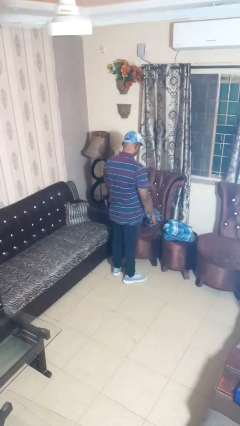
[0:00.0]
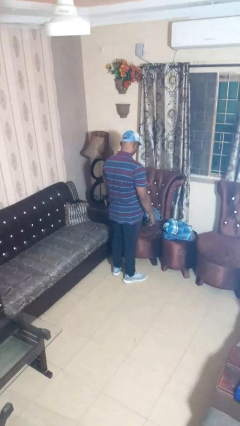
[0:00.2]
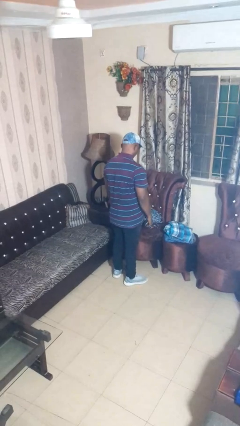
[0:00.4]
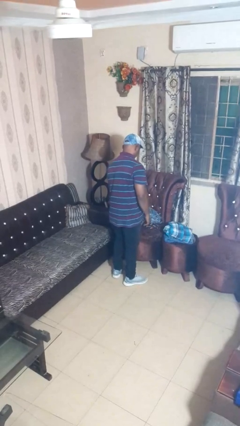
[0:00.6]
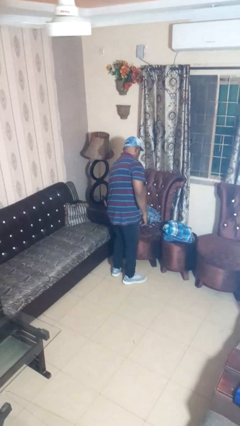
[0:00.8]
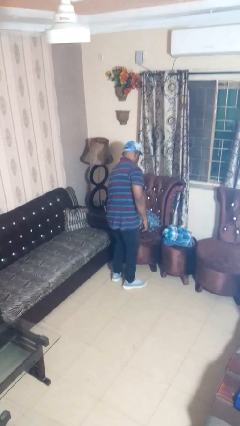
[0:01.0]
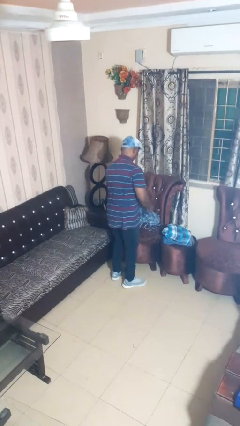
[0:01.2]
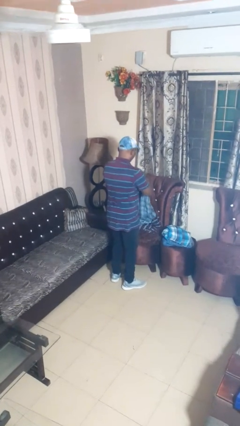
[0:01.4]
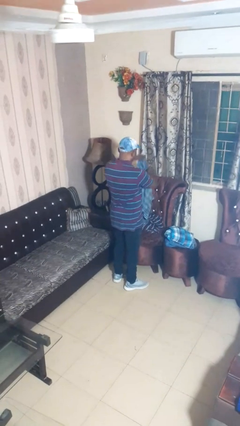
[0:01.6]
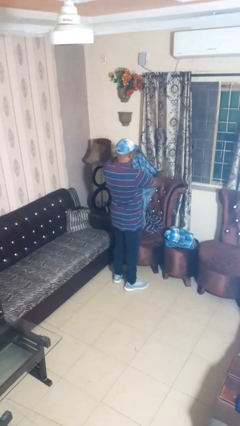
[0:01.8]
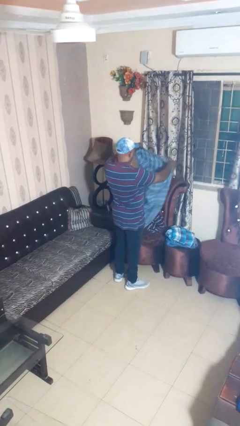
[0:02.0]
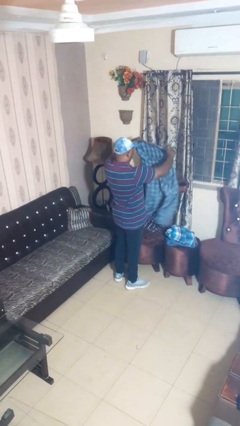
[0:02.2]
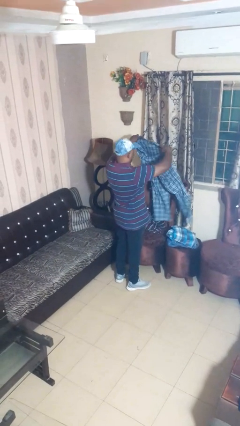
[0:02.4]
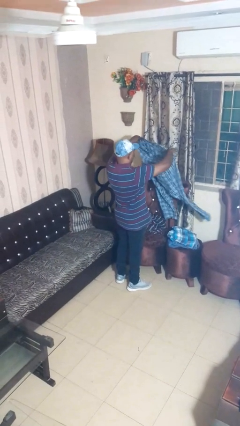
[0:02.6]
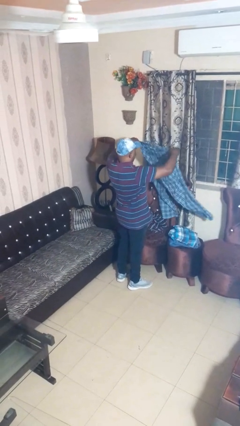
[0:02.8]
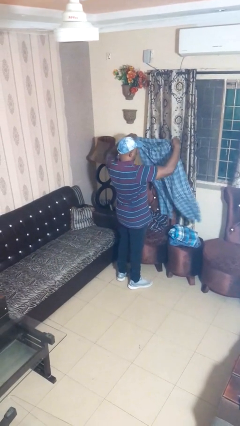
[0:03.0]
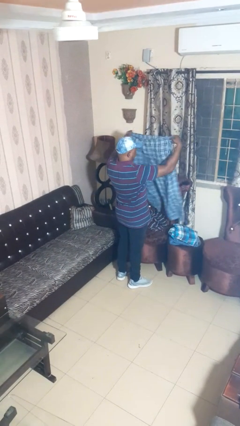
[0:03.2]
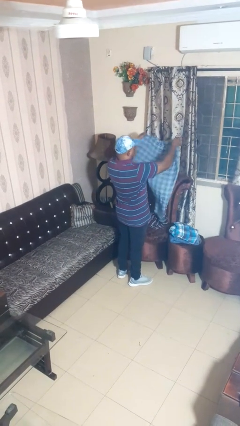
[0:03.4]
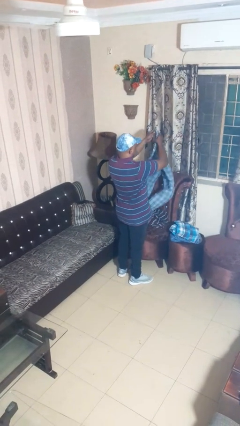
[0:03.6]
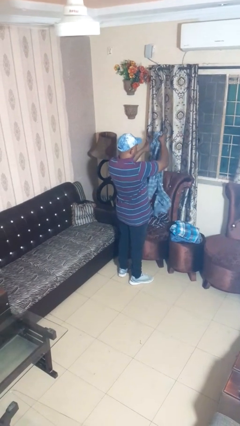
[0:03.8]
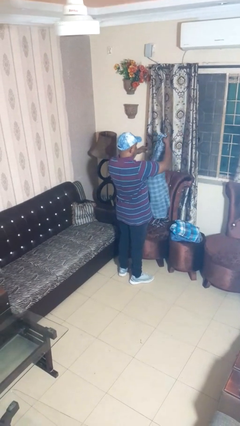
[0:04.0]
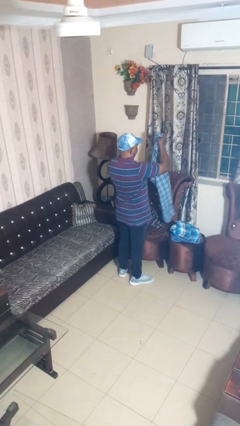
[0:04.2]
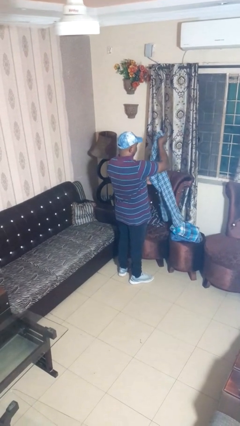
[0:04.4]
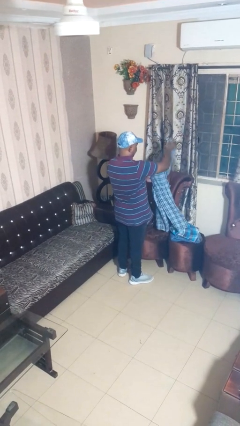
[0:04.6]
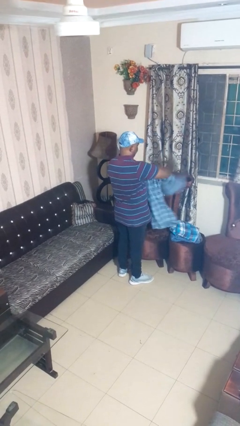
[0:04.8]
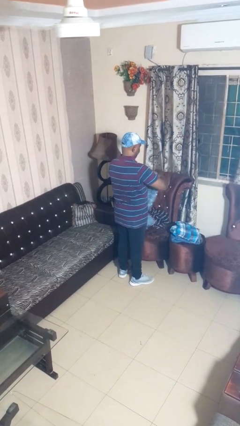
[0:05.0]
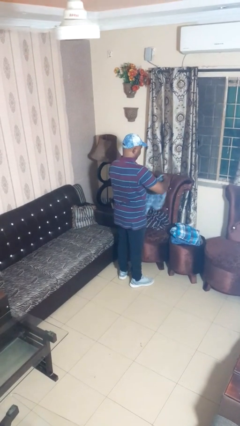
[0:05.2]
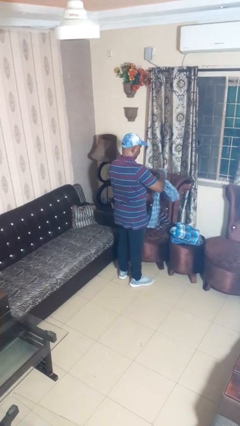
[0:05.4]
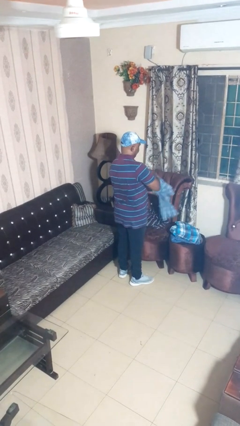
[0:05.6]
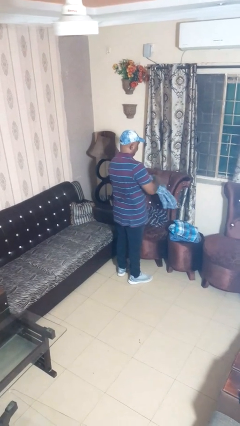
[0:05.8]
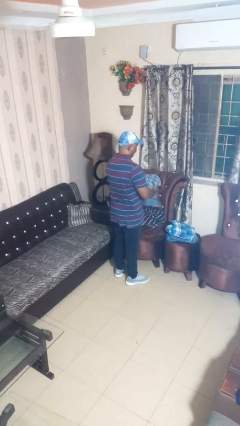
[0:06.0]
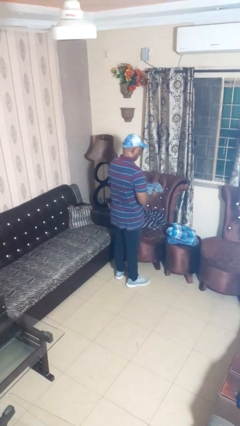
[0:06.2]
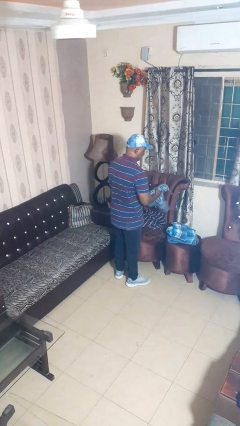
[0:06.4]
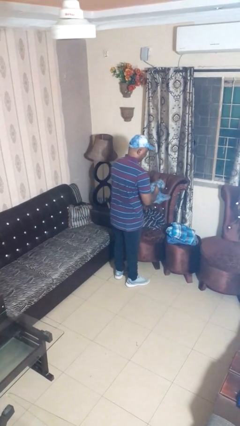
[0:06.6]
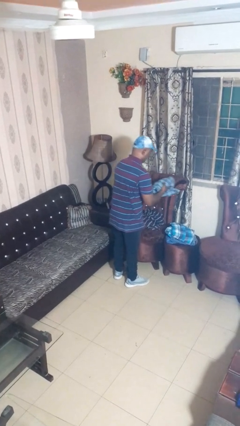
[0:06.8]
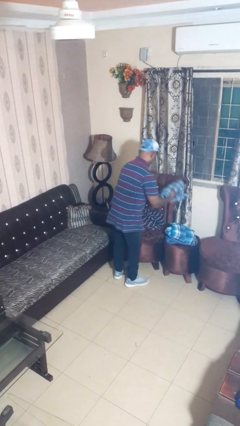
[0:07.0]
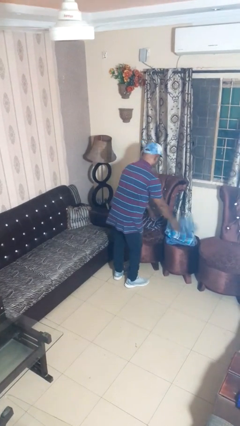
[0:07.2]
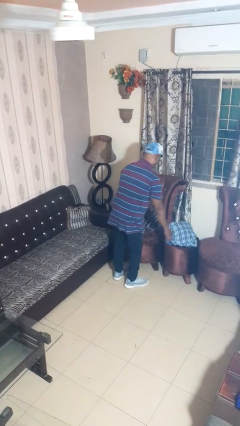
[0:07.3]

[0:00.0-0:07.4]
person folds pants

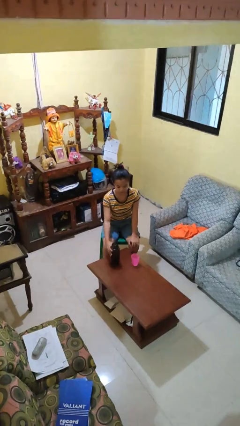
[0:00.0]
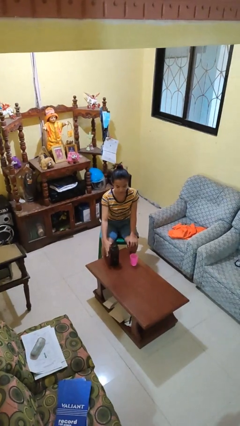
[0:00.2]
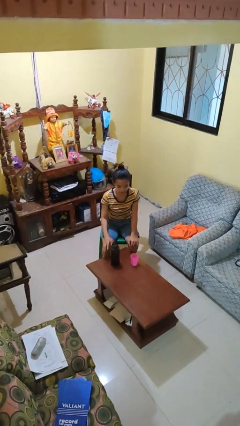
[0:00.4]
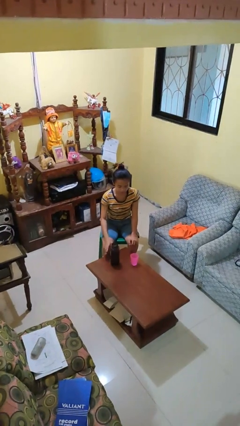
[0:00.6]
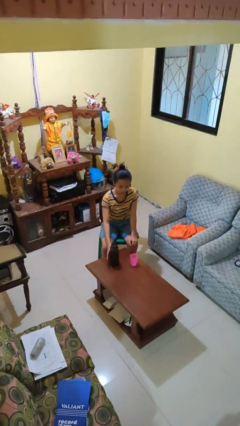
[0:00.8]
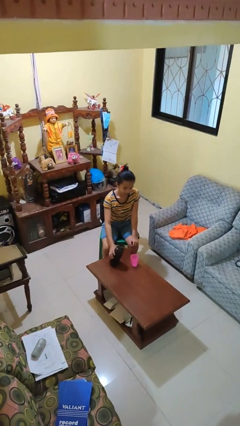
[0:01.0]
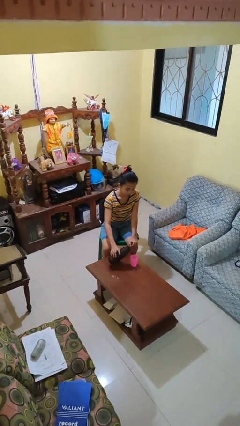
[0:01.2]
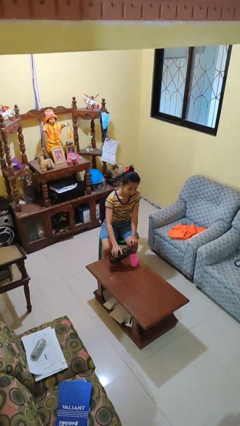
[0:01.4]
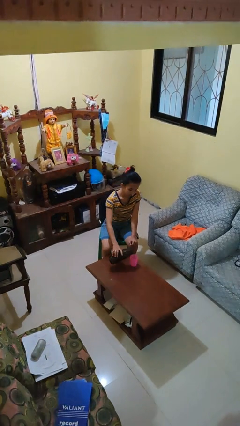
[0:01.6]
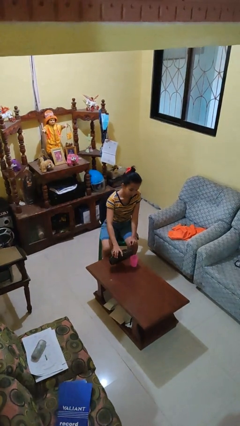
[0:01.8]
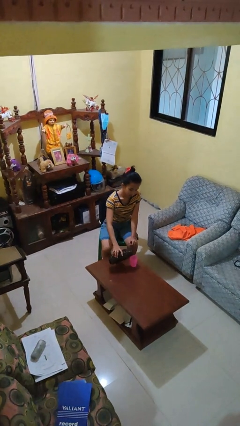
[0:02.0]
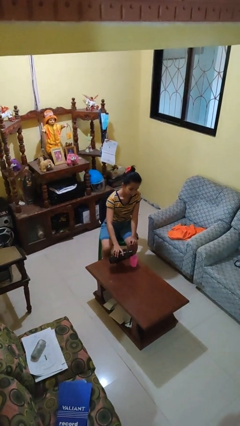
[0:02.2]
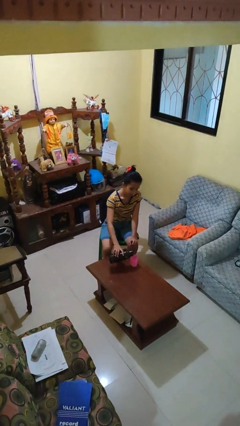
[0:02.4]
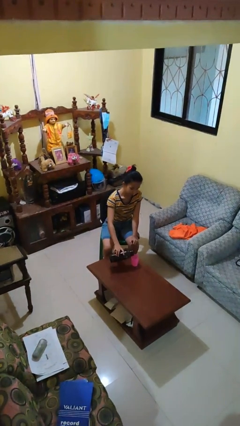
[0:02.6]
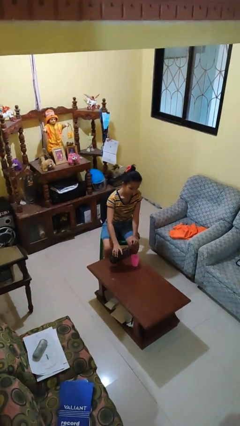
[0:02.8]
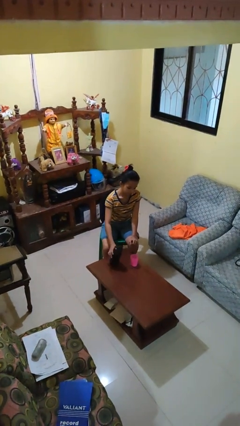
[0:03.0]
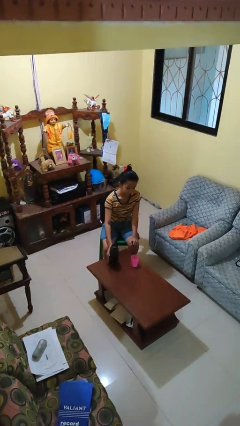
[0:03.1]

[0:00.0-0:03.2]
person pours liquid into cup

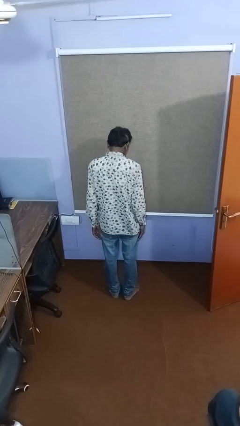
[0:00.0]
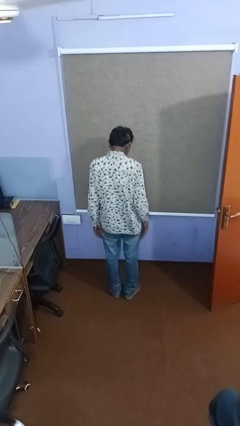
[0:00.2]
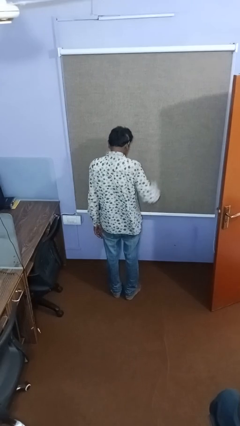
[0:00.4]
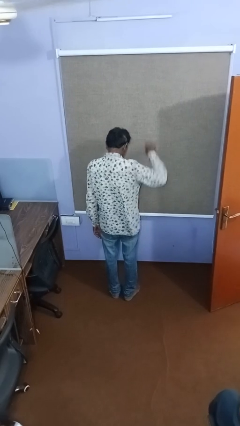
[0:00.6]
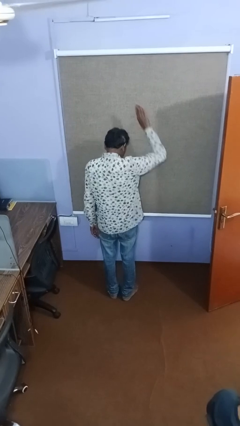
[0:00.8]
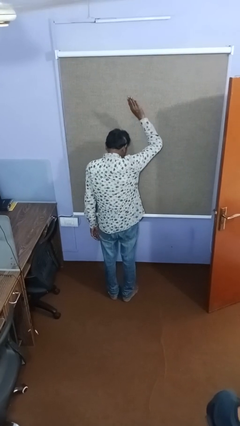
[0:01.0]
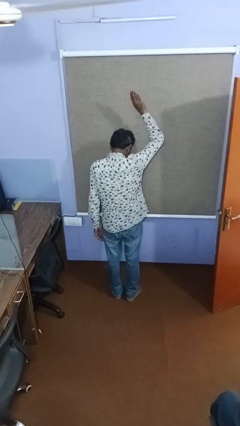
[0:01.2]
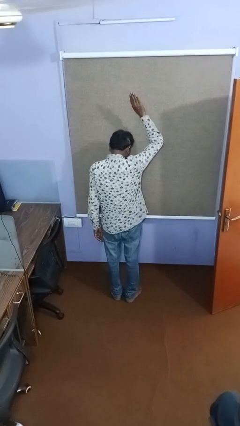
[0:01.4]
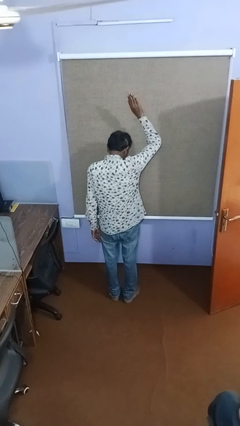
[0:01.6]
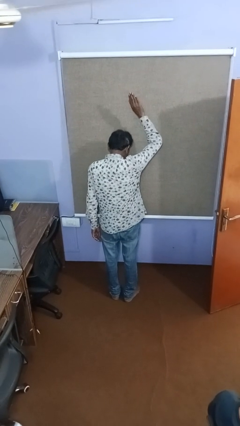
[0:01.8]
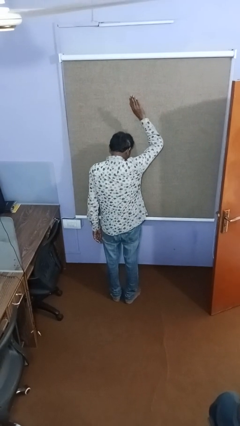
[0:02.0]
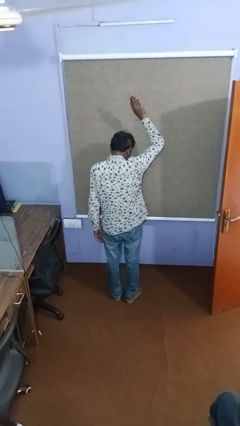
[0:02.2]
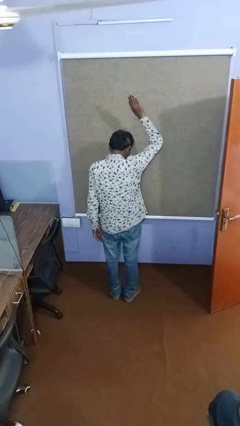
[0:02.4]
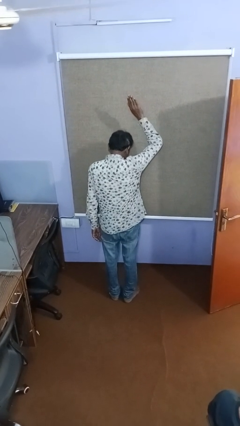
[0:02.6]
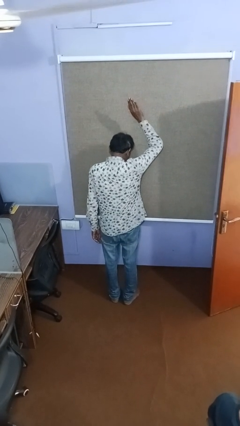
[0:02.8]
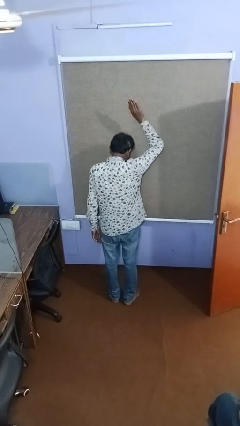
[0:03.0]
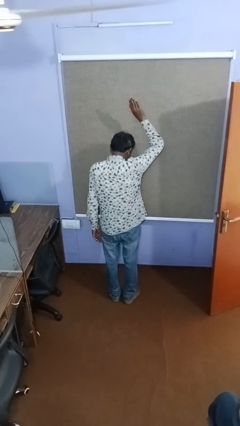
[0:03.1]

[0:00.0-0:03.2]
person gestures raise hand

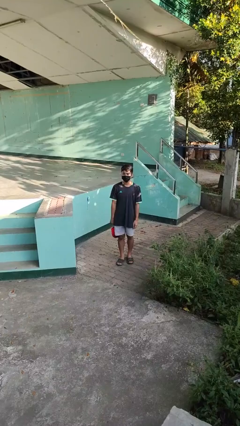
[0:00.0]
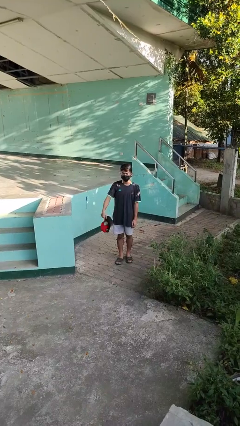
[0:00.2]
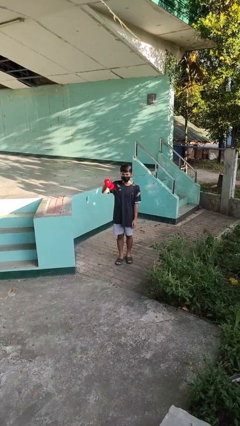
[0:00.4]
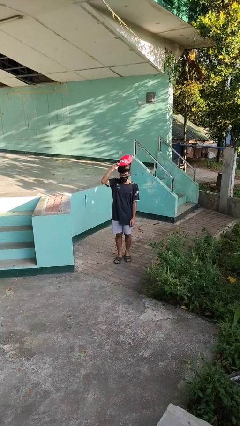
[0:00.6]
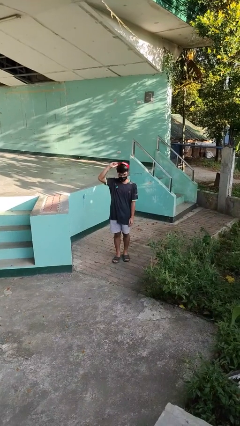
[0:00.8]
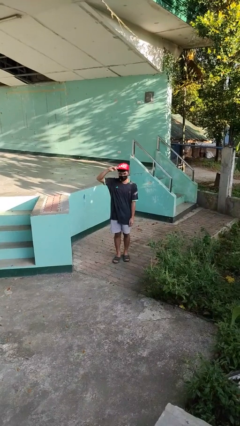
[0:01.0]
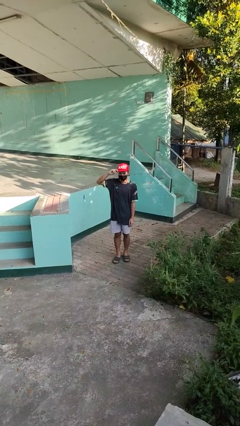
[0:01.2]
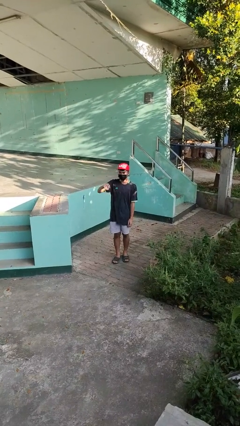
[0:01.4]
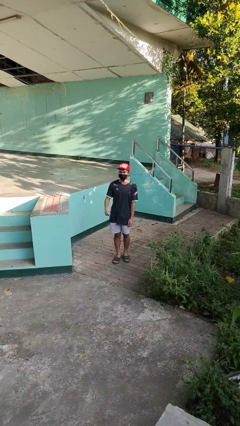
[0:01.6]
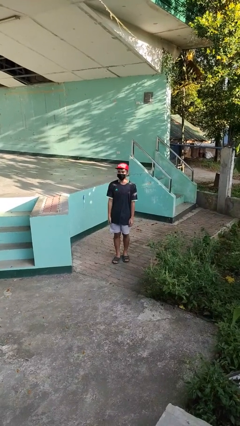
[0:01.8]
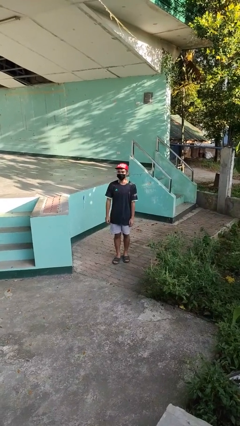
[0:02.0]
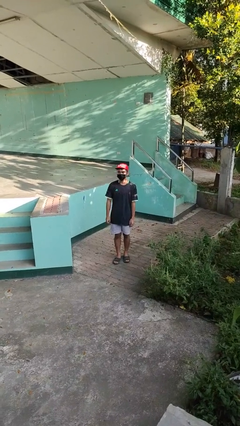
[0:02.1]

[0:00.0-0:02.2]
person puts on hat

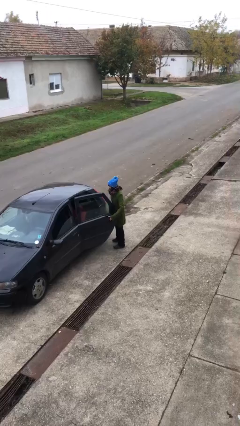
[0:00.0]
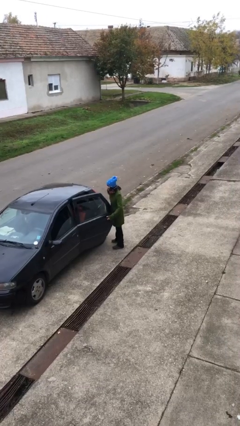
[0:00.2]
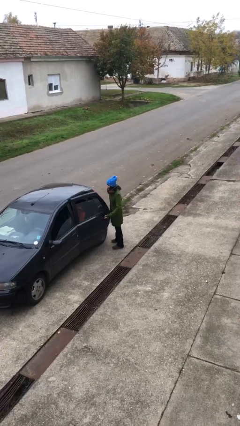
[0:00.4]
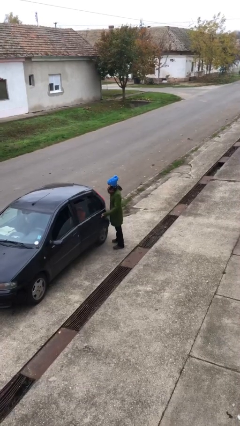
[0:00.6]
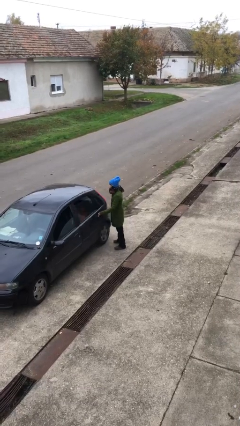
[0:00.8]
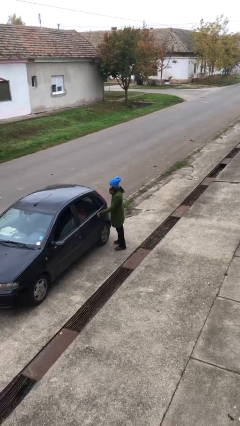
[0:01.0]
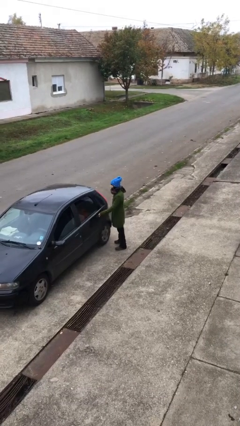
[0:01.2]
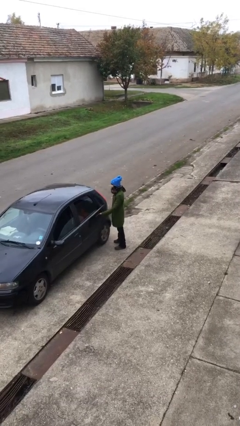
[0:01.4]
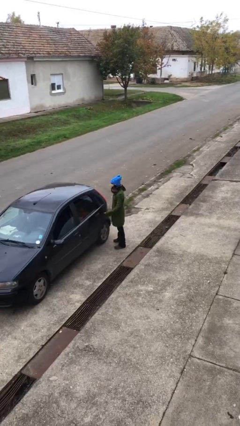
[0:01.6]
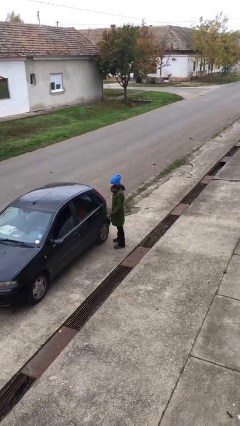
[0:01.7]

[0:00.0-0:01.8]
person closes car door
